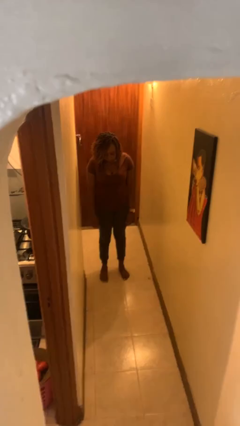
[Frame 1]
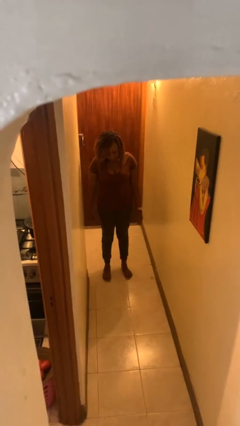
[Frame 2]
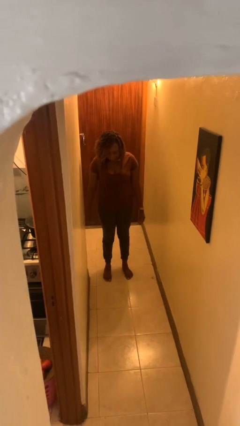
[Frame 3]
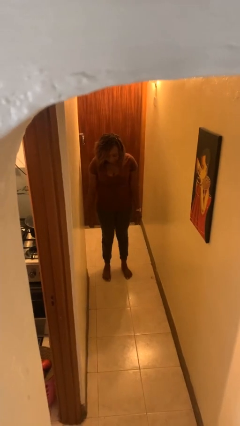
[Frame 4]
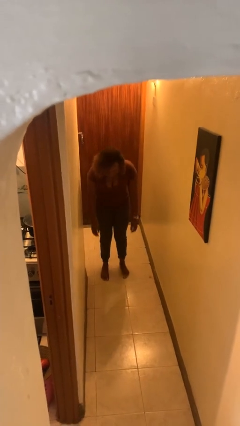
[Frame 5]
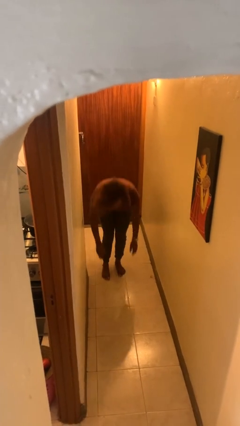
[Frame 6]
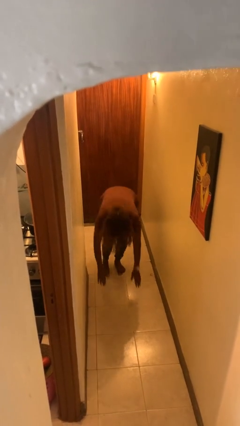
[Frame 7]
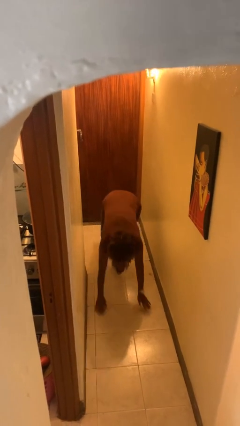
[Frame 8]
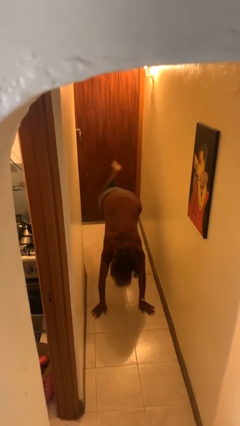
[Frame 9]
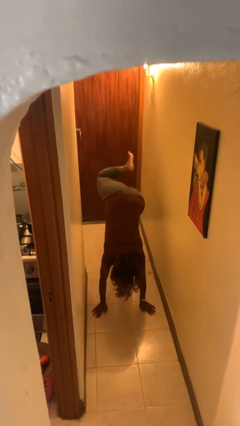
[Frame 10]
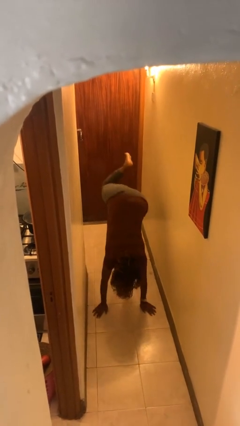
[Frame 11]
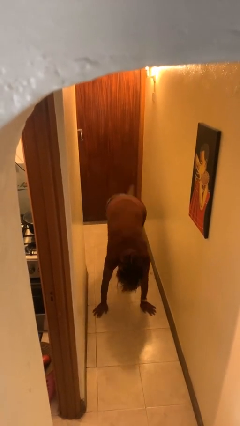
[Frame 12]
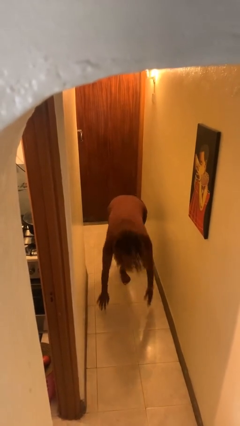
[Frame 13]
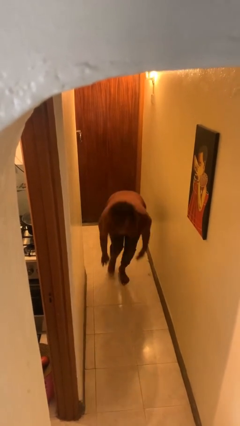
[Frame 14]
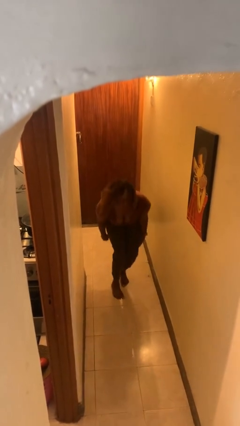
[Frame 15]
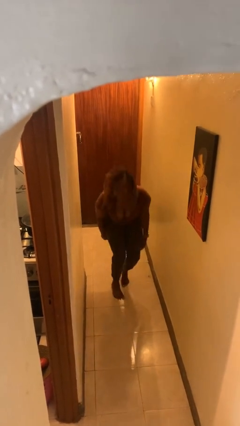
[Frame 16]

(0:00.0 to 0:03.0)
person handstand

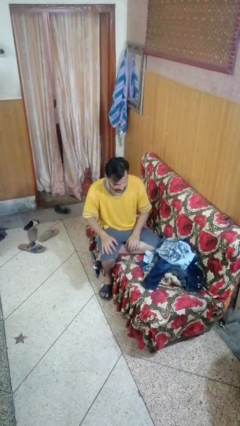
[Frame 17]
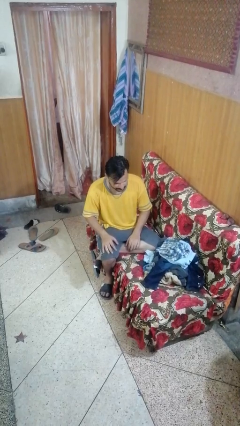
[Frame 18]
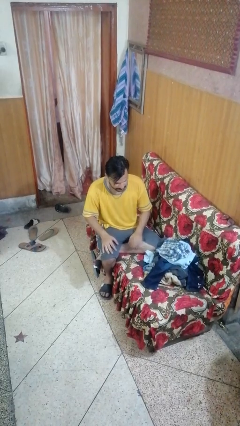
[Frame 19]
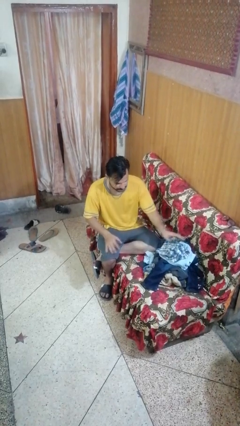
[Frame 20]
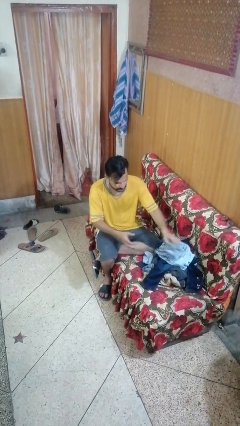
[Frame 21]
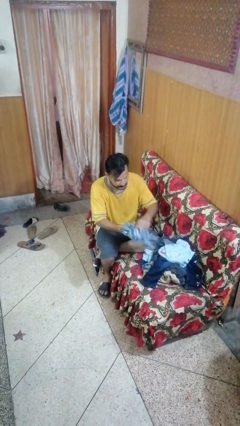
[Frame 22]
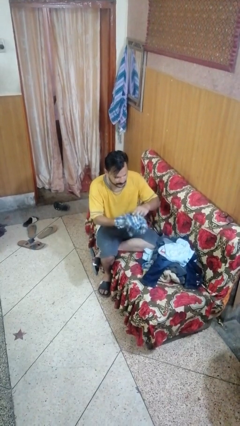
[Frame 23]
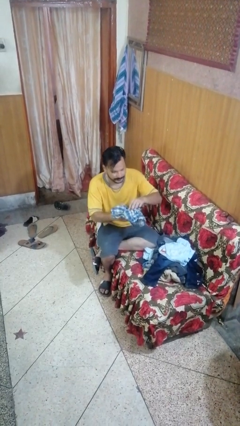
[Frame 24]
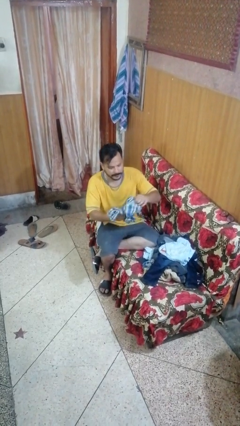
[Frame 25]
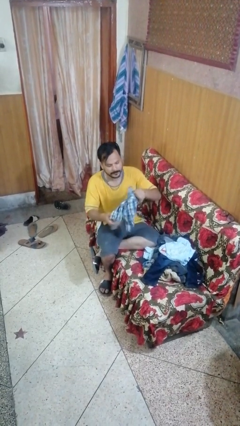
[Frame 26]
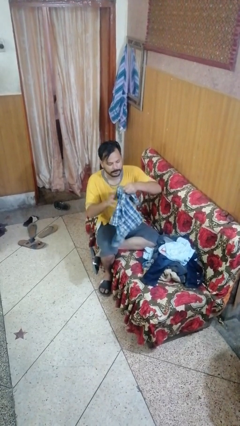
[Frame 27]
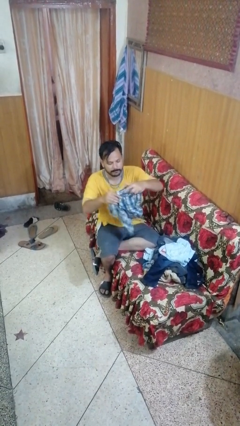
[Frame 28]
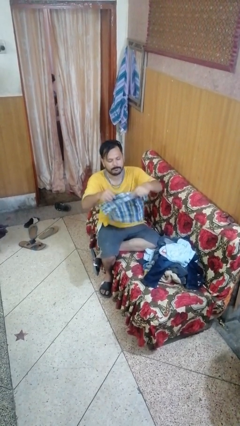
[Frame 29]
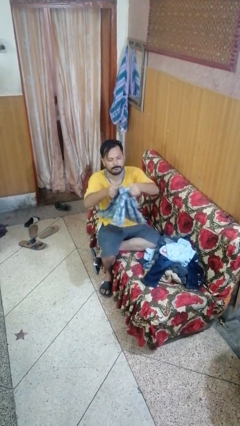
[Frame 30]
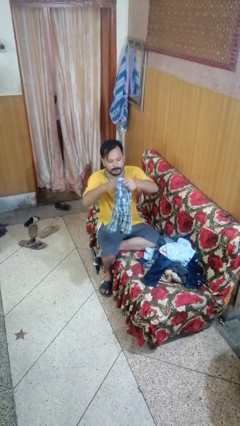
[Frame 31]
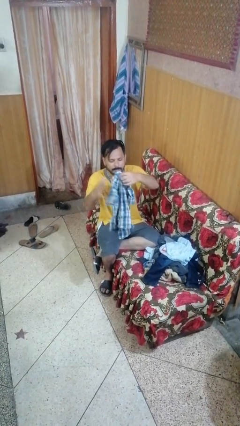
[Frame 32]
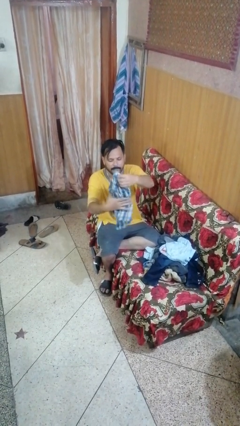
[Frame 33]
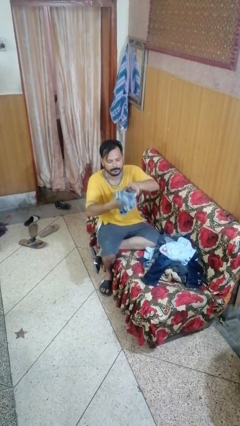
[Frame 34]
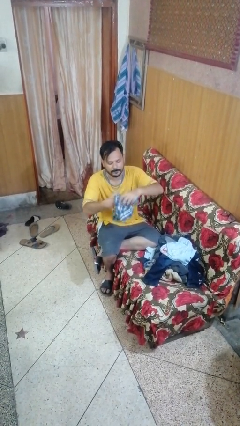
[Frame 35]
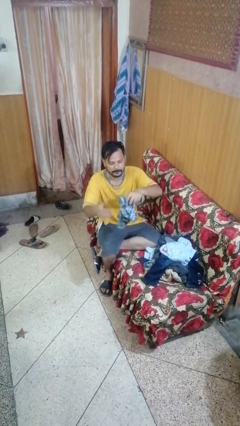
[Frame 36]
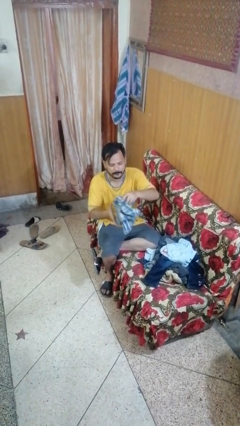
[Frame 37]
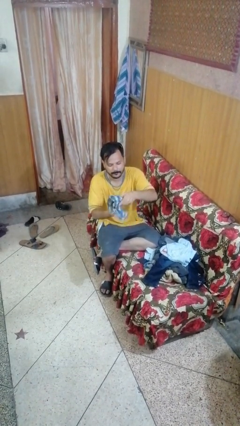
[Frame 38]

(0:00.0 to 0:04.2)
person folds shirt

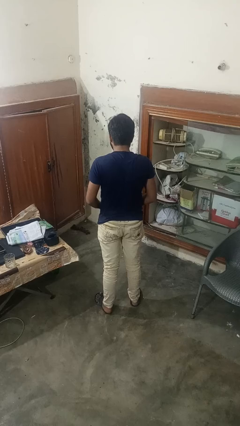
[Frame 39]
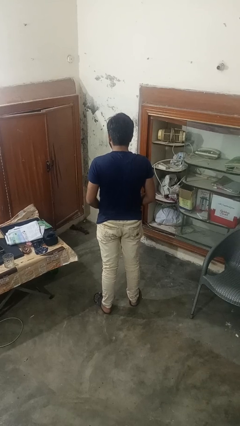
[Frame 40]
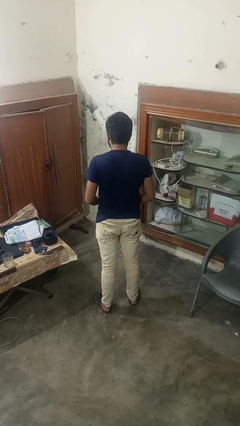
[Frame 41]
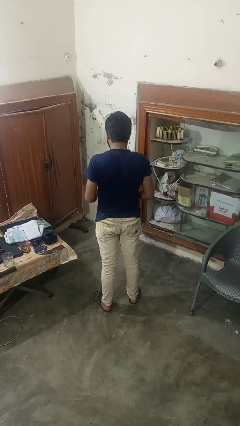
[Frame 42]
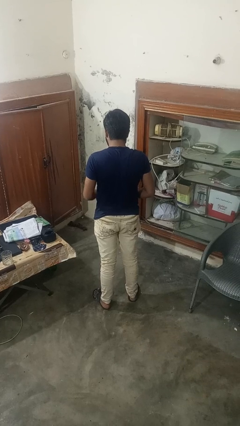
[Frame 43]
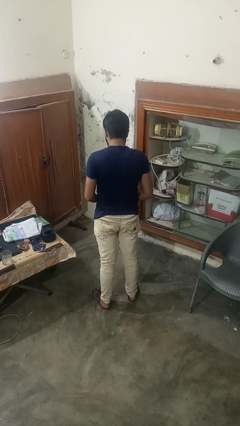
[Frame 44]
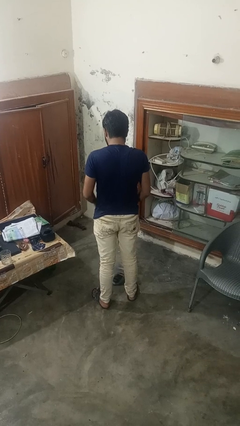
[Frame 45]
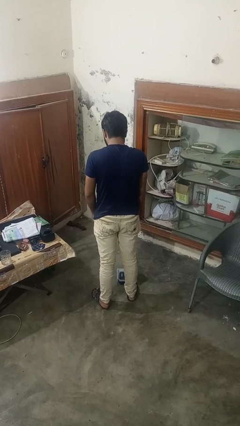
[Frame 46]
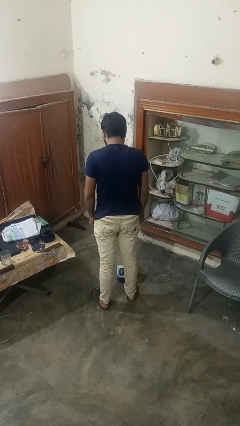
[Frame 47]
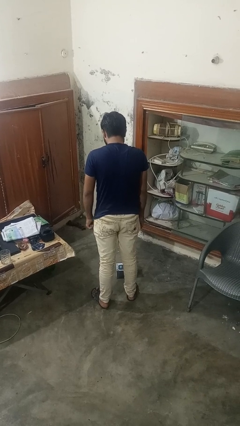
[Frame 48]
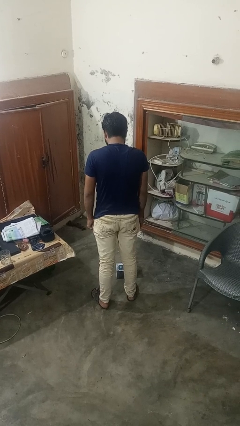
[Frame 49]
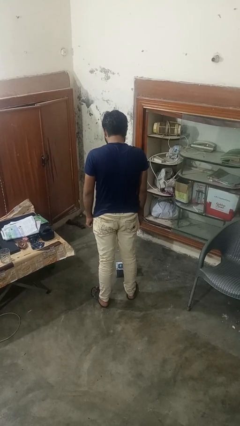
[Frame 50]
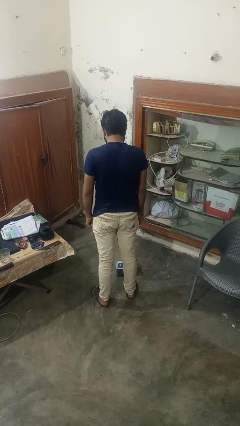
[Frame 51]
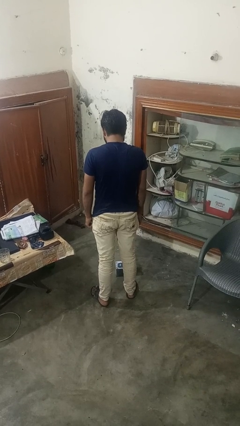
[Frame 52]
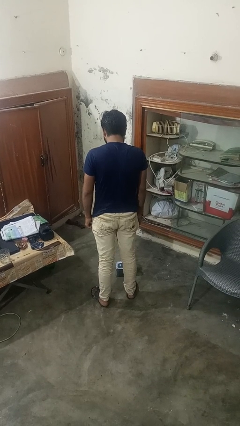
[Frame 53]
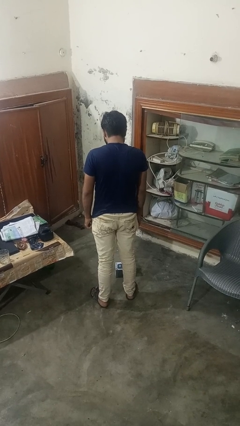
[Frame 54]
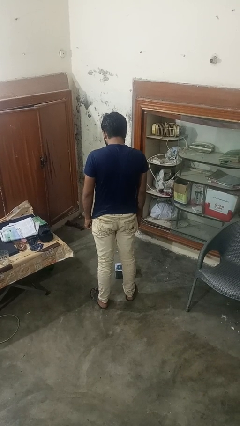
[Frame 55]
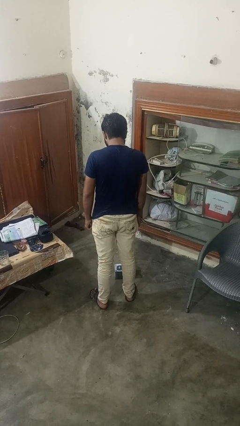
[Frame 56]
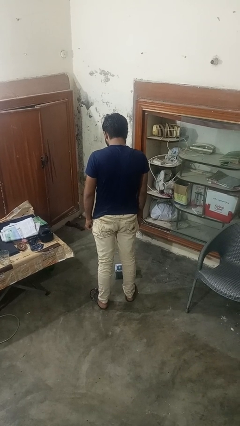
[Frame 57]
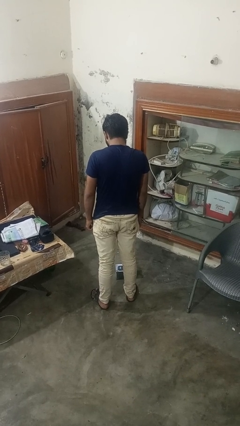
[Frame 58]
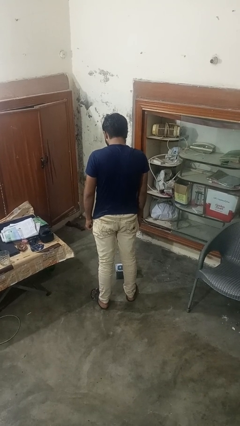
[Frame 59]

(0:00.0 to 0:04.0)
person drops object

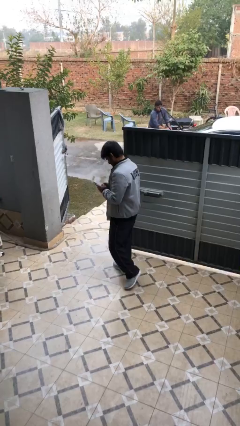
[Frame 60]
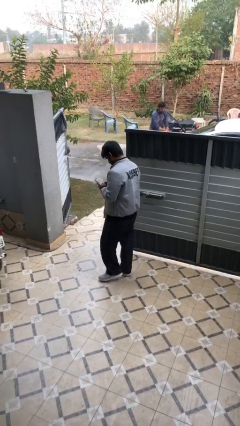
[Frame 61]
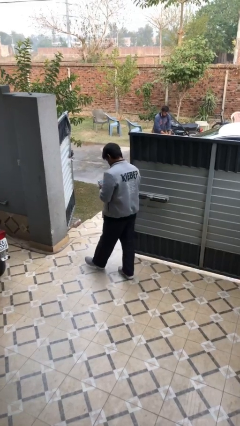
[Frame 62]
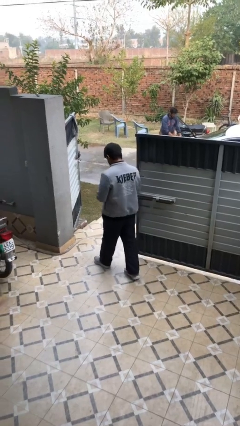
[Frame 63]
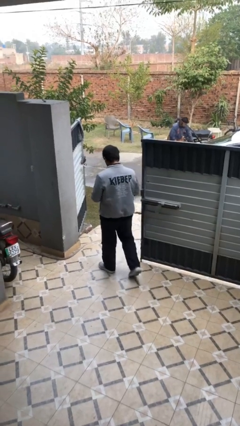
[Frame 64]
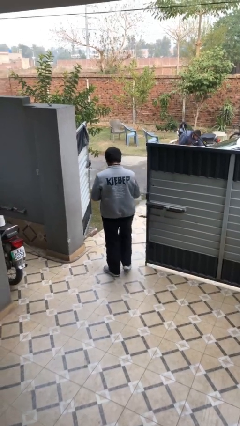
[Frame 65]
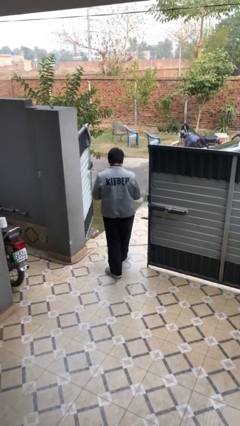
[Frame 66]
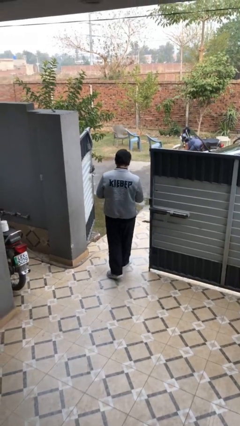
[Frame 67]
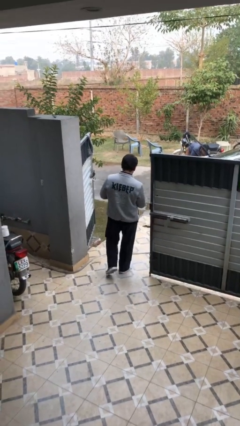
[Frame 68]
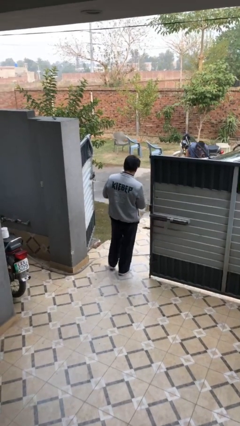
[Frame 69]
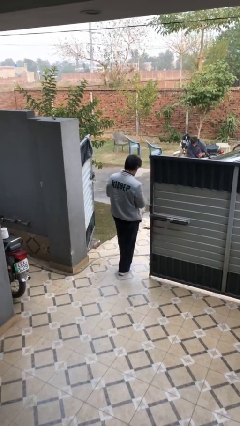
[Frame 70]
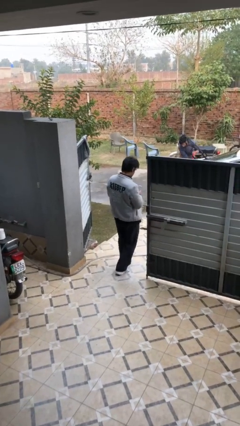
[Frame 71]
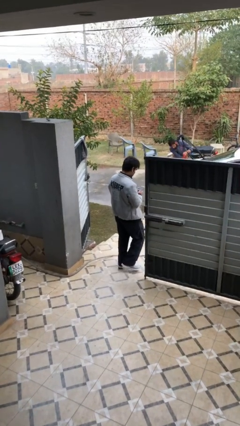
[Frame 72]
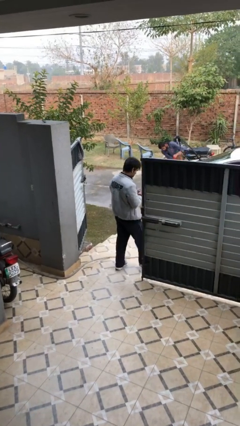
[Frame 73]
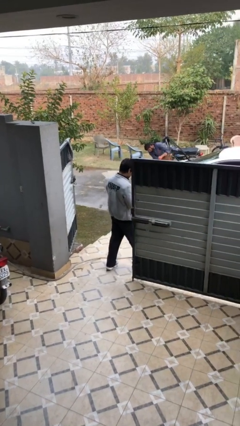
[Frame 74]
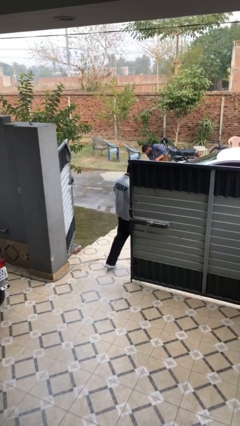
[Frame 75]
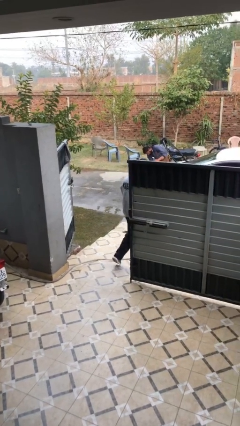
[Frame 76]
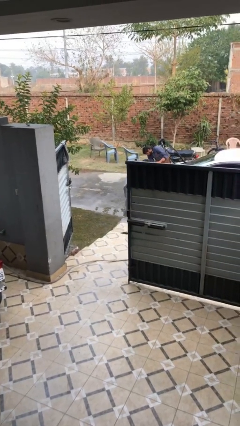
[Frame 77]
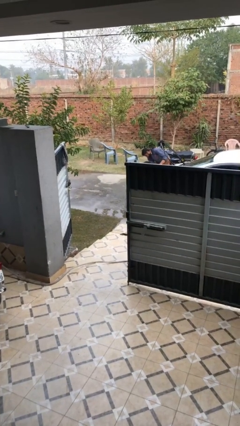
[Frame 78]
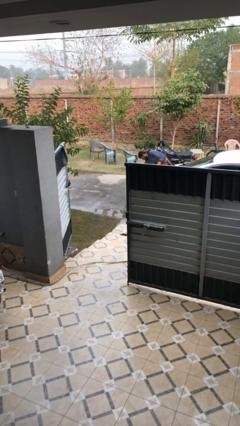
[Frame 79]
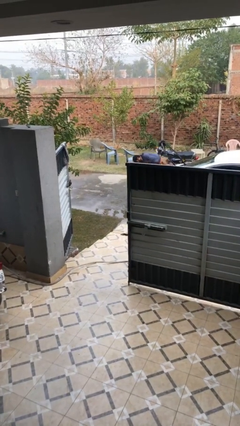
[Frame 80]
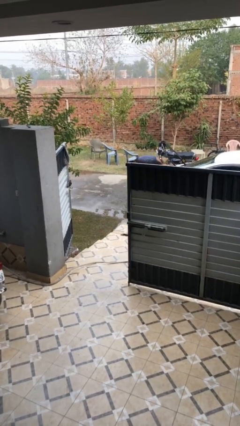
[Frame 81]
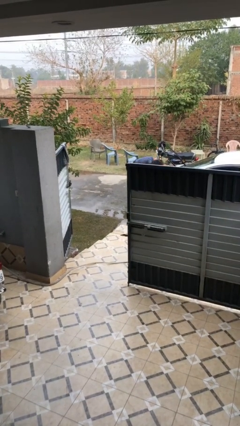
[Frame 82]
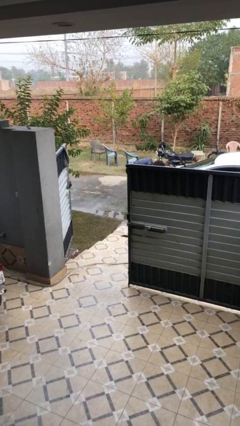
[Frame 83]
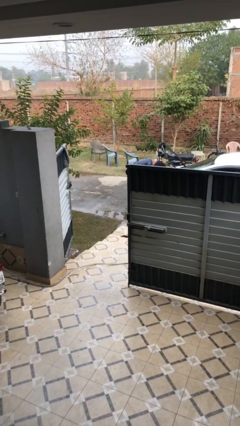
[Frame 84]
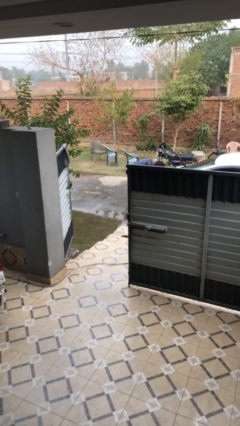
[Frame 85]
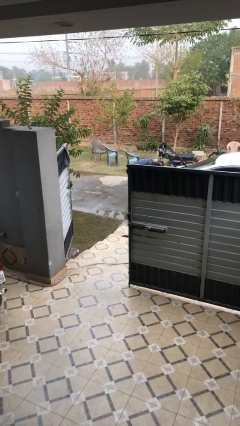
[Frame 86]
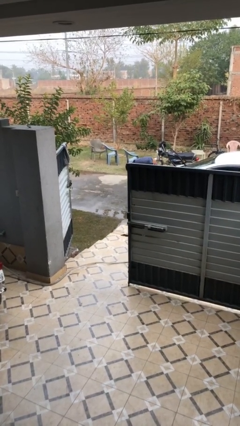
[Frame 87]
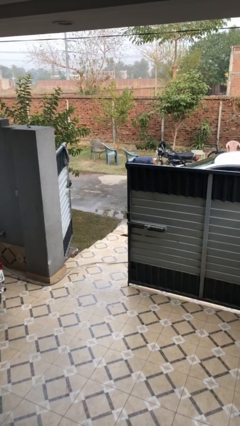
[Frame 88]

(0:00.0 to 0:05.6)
person exits scene through structure

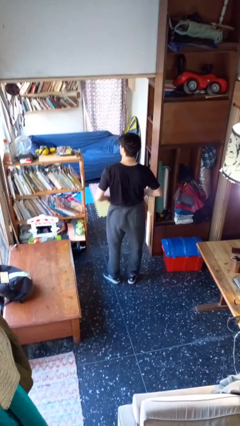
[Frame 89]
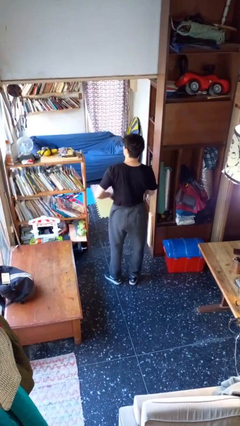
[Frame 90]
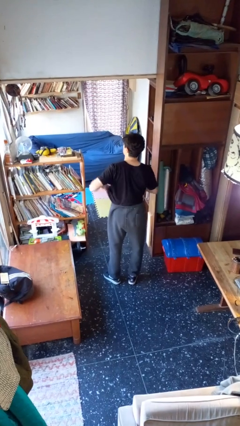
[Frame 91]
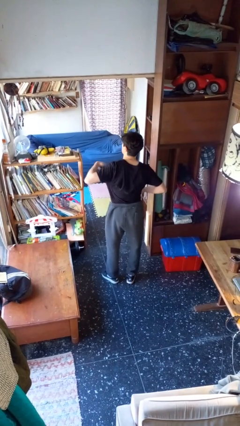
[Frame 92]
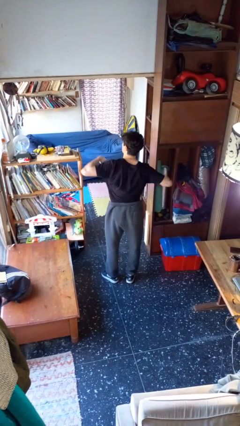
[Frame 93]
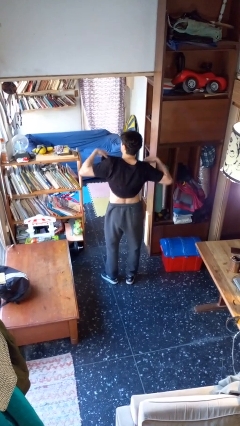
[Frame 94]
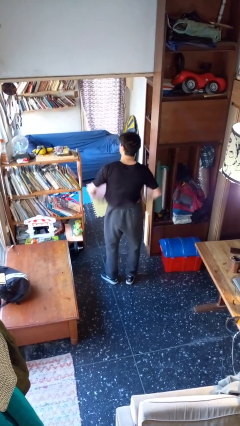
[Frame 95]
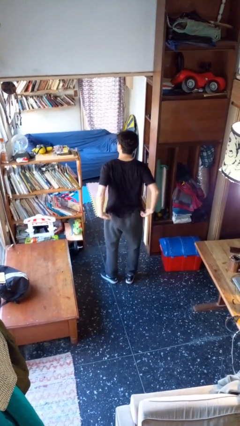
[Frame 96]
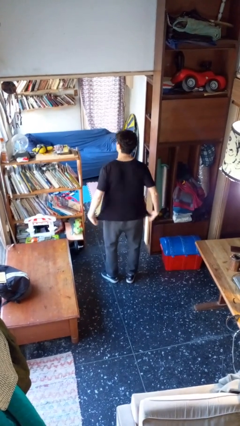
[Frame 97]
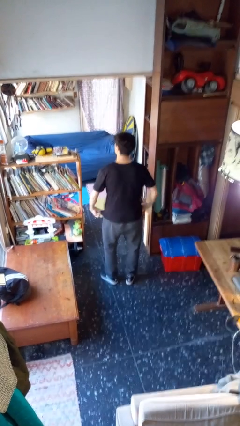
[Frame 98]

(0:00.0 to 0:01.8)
person untucks shirt
